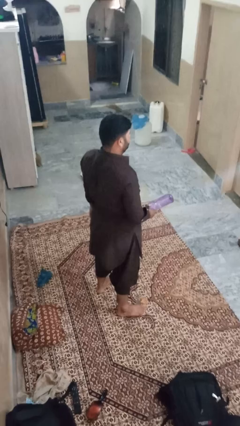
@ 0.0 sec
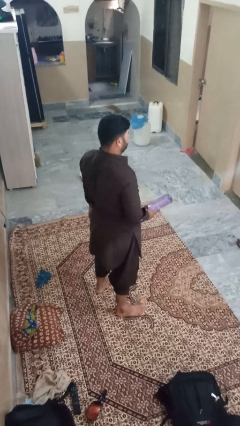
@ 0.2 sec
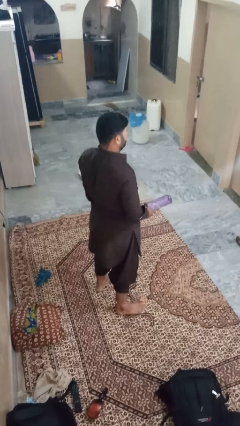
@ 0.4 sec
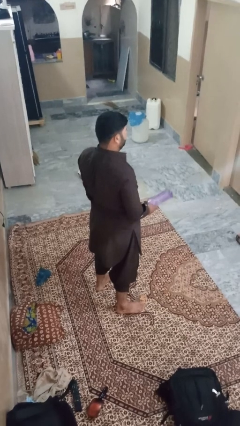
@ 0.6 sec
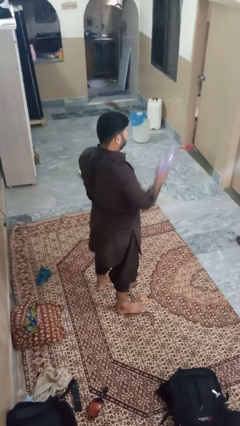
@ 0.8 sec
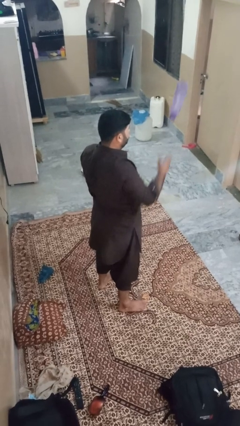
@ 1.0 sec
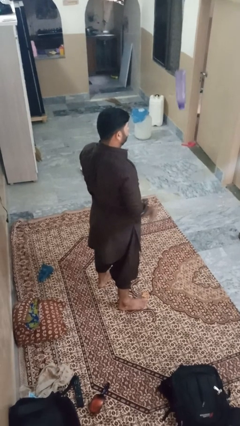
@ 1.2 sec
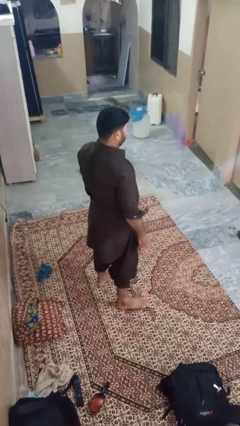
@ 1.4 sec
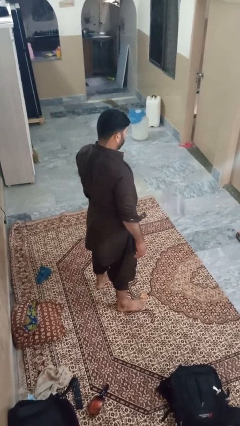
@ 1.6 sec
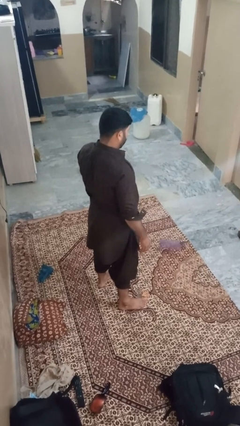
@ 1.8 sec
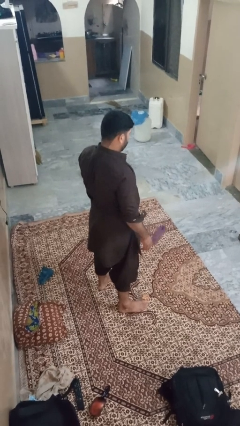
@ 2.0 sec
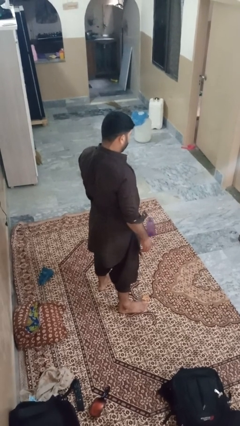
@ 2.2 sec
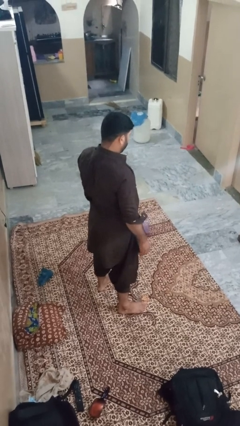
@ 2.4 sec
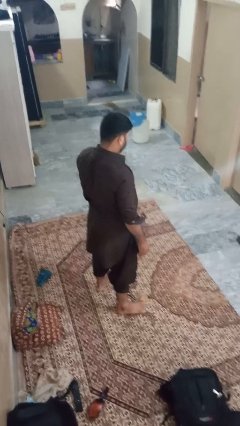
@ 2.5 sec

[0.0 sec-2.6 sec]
person throws object into air

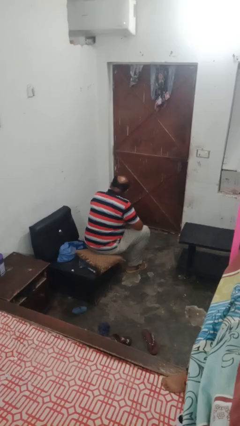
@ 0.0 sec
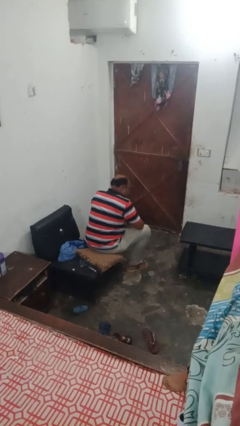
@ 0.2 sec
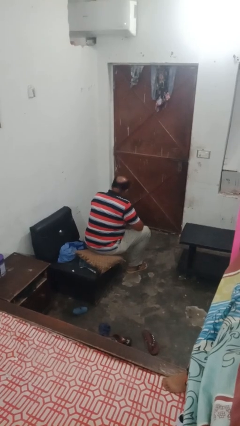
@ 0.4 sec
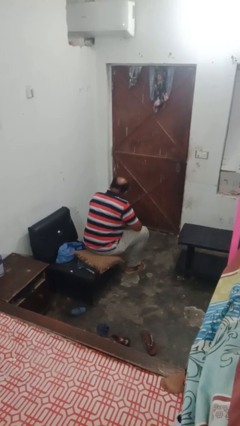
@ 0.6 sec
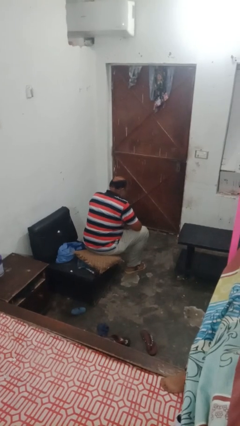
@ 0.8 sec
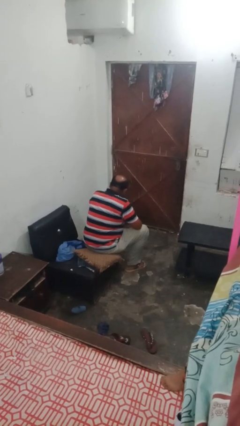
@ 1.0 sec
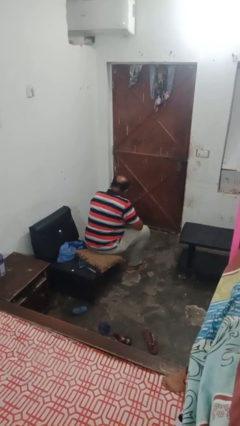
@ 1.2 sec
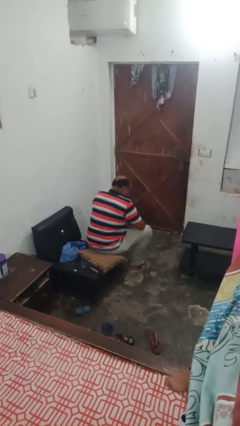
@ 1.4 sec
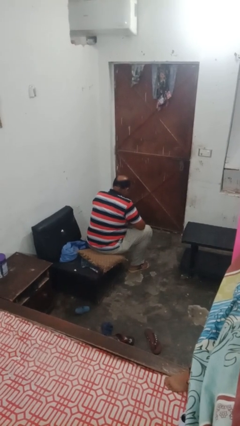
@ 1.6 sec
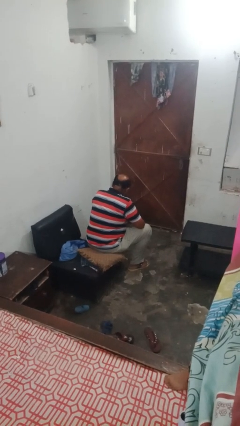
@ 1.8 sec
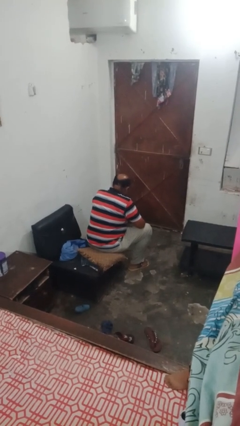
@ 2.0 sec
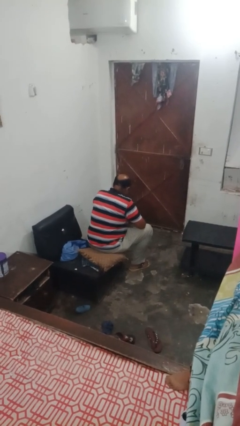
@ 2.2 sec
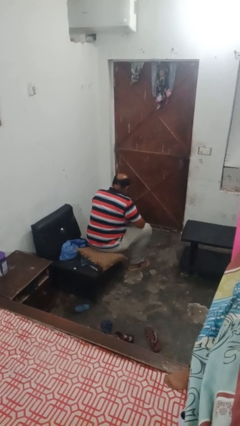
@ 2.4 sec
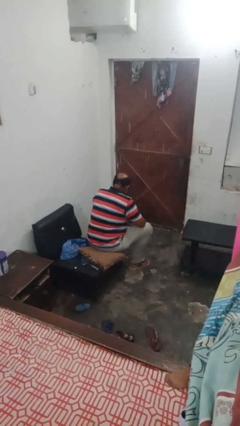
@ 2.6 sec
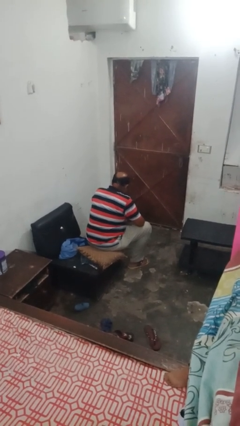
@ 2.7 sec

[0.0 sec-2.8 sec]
person shakes head

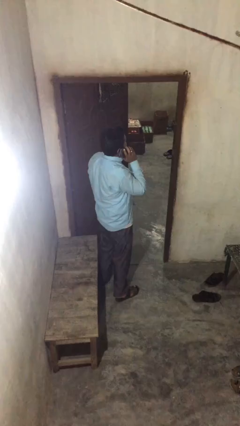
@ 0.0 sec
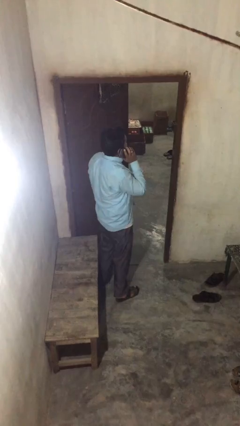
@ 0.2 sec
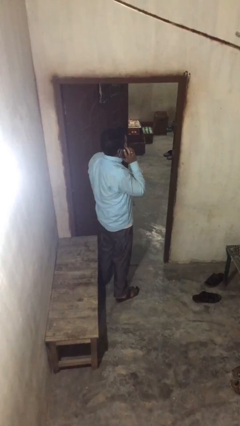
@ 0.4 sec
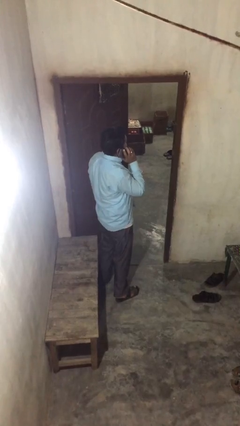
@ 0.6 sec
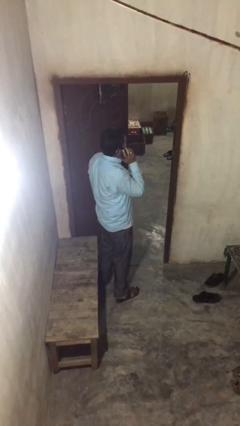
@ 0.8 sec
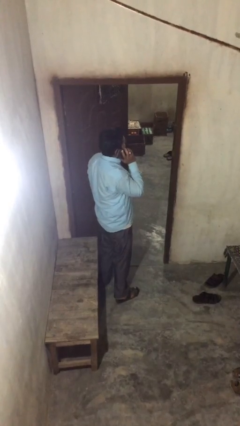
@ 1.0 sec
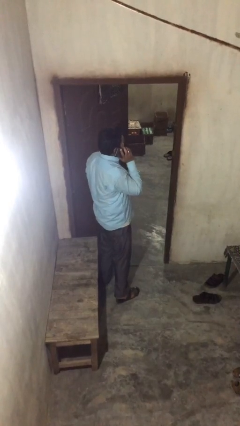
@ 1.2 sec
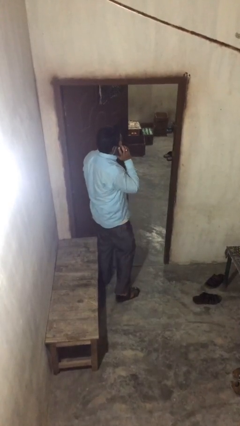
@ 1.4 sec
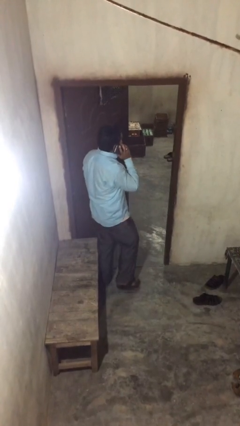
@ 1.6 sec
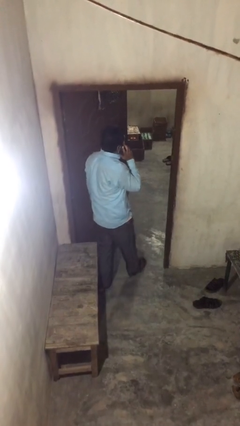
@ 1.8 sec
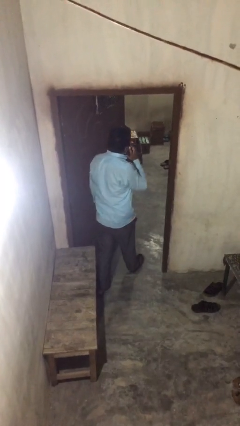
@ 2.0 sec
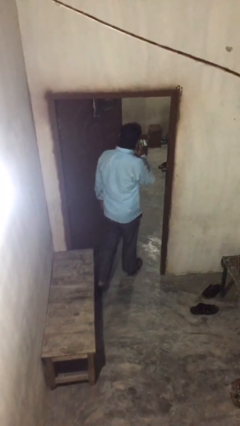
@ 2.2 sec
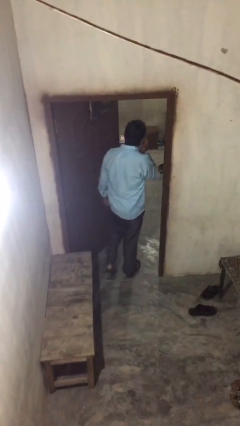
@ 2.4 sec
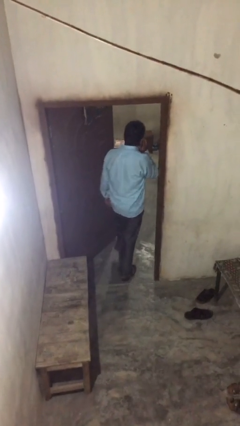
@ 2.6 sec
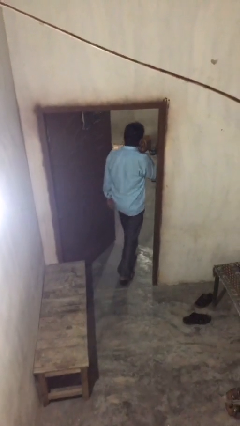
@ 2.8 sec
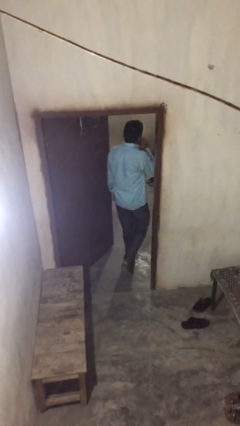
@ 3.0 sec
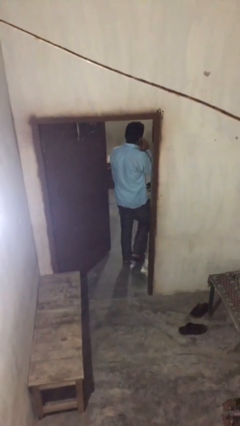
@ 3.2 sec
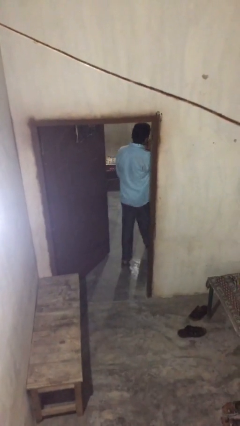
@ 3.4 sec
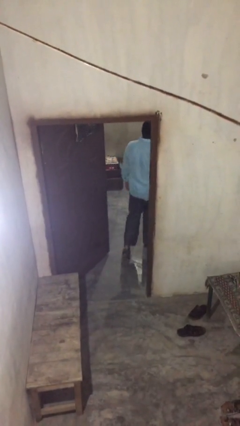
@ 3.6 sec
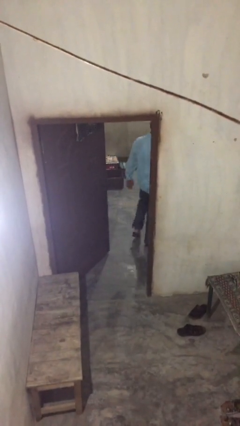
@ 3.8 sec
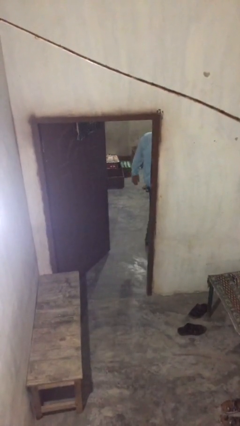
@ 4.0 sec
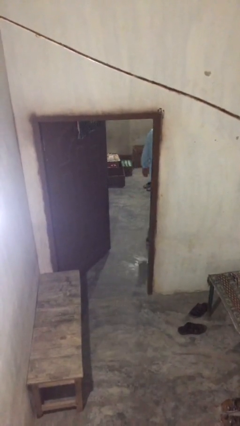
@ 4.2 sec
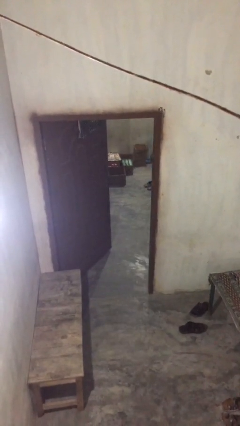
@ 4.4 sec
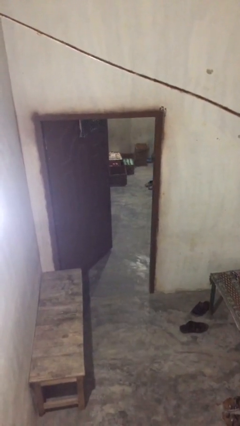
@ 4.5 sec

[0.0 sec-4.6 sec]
person exits scene through structure

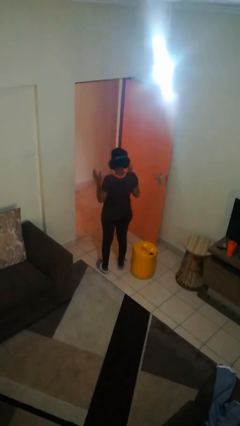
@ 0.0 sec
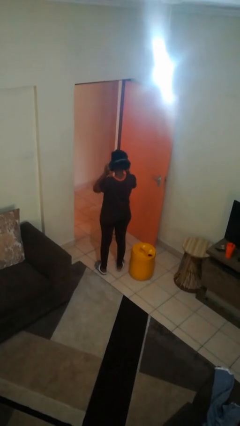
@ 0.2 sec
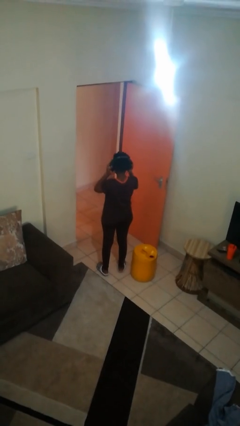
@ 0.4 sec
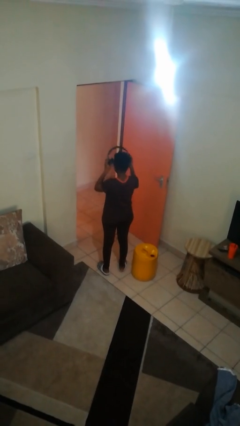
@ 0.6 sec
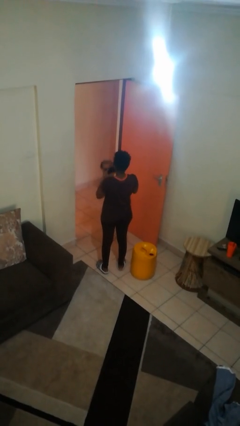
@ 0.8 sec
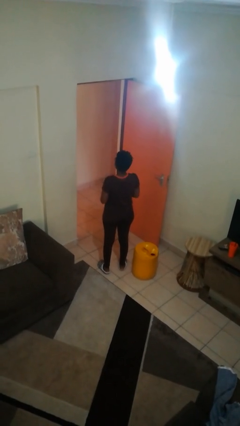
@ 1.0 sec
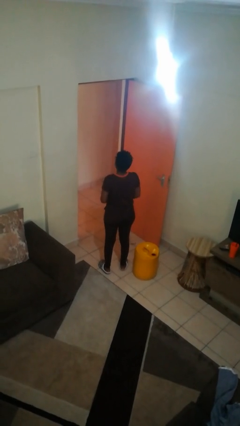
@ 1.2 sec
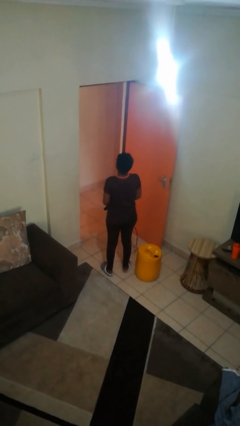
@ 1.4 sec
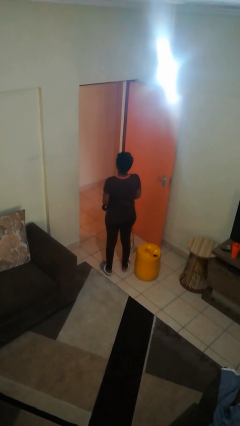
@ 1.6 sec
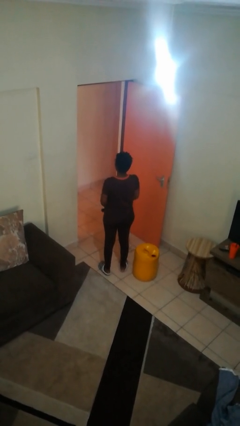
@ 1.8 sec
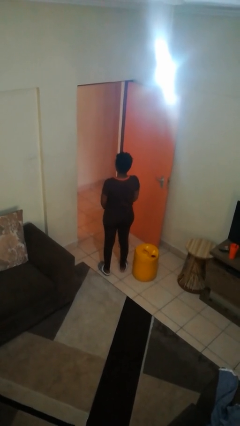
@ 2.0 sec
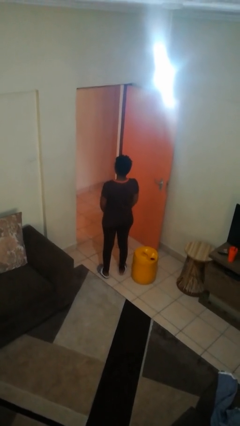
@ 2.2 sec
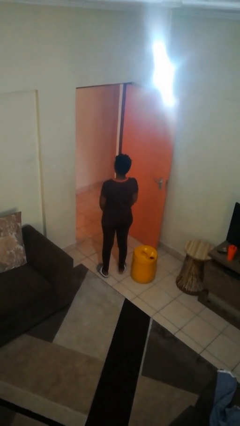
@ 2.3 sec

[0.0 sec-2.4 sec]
person takes off headphones

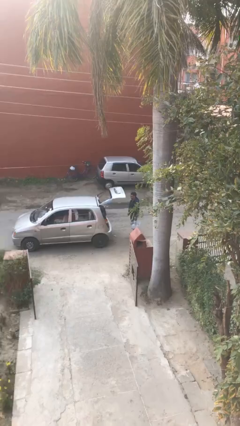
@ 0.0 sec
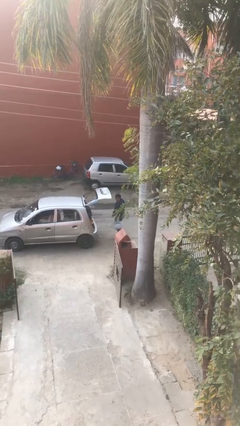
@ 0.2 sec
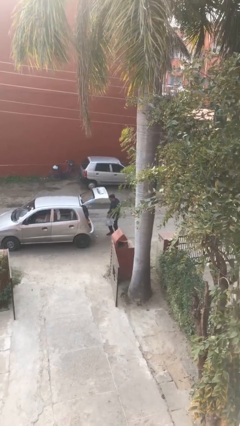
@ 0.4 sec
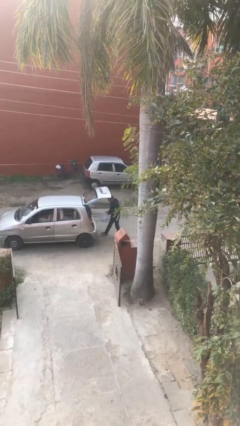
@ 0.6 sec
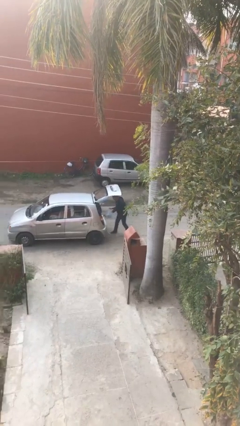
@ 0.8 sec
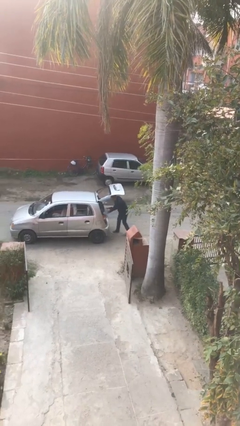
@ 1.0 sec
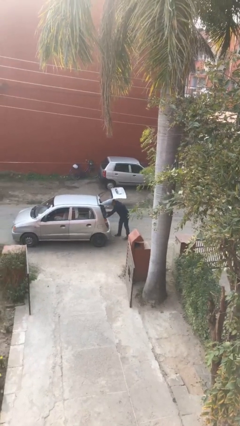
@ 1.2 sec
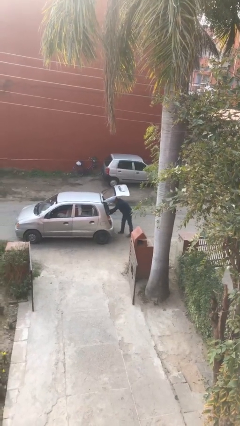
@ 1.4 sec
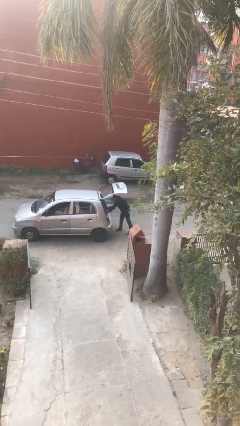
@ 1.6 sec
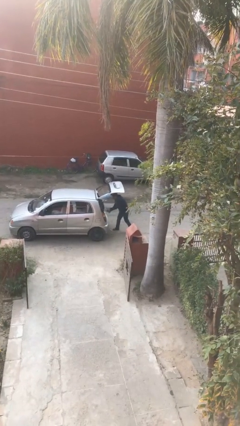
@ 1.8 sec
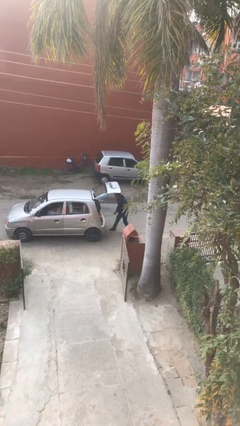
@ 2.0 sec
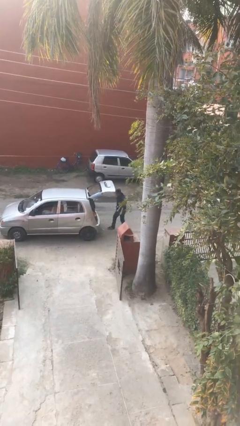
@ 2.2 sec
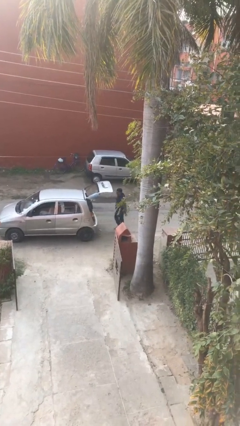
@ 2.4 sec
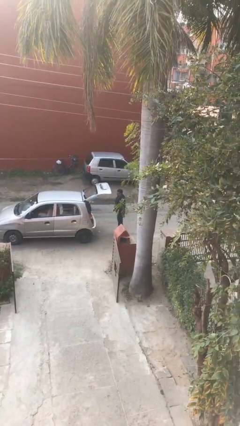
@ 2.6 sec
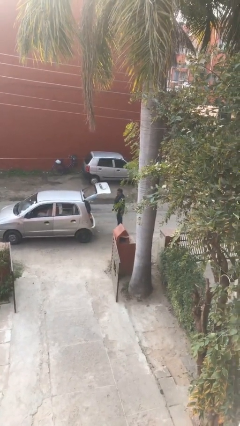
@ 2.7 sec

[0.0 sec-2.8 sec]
person loads car

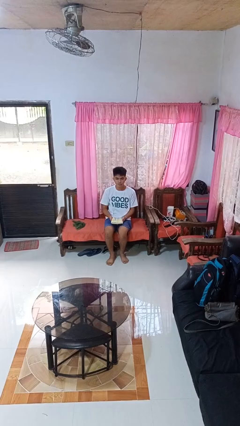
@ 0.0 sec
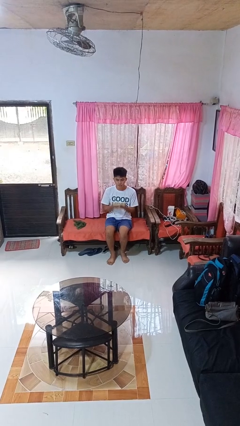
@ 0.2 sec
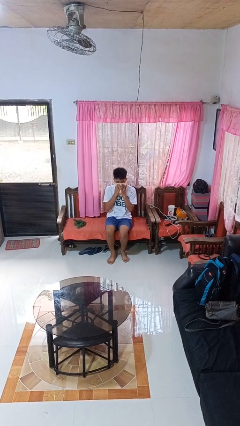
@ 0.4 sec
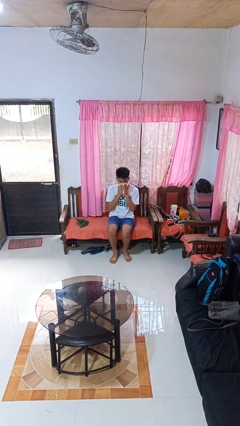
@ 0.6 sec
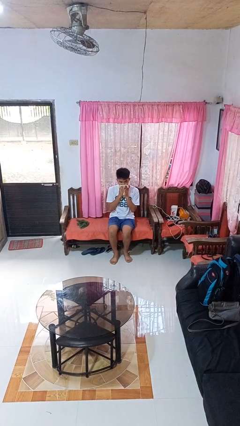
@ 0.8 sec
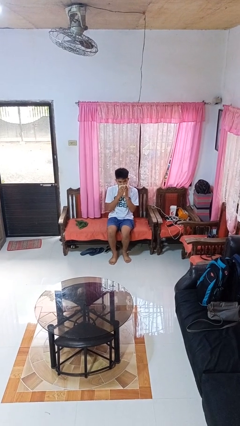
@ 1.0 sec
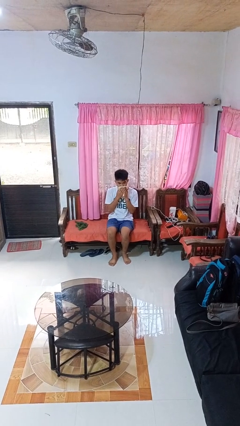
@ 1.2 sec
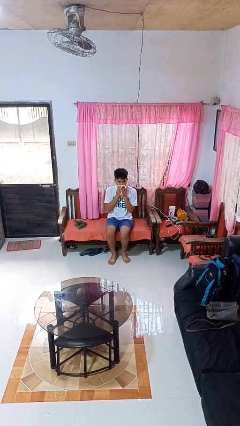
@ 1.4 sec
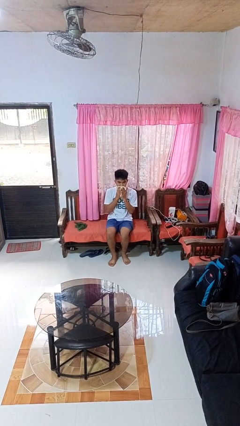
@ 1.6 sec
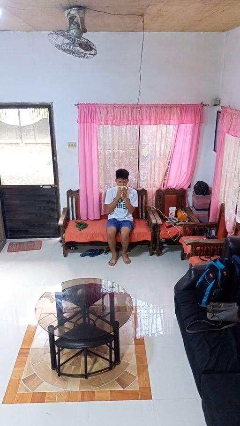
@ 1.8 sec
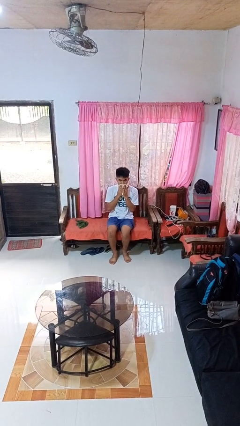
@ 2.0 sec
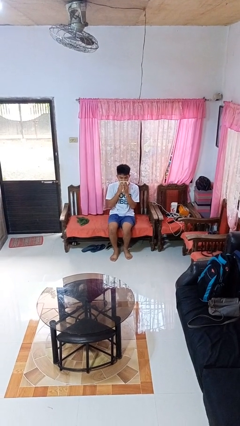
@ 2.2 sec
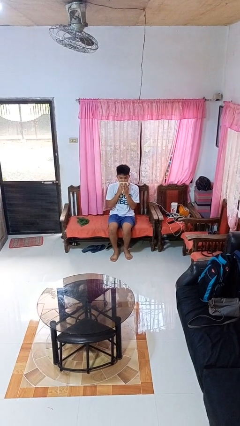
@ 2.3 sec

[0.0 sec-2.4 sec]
person wipes mouth with napkin
